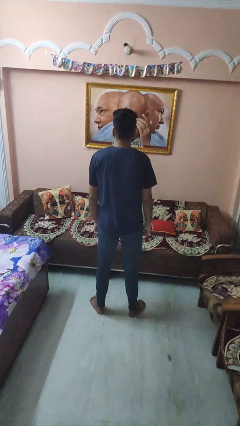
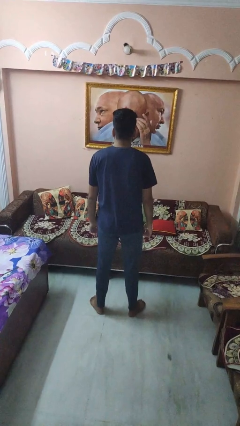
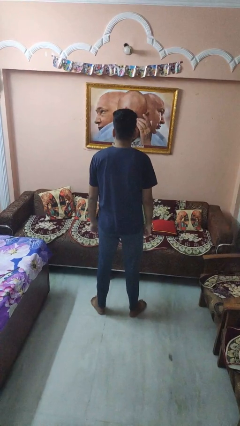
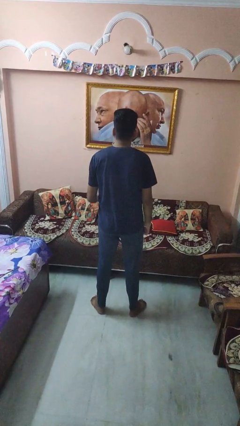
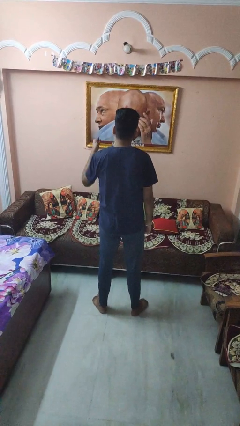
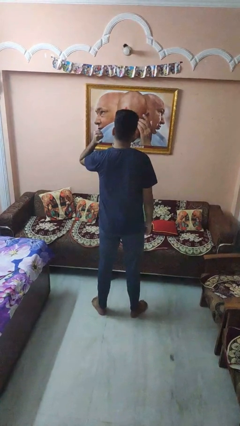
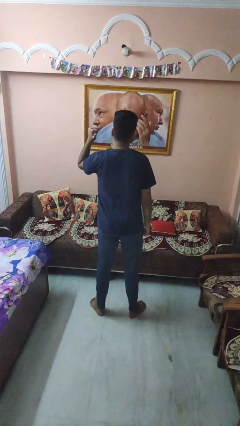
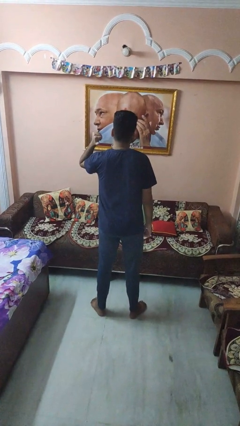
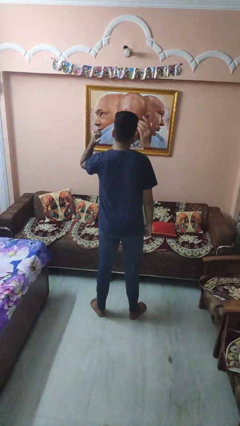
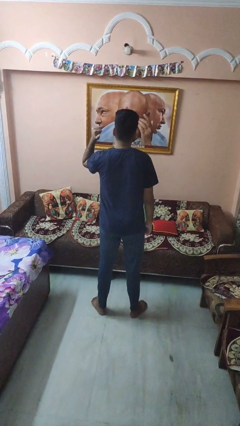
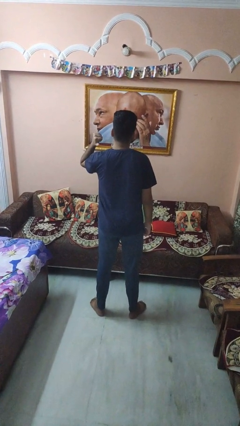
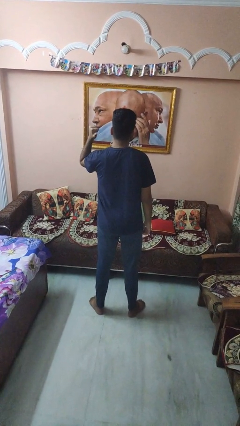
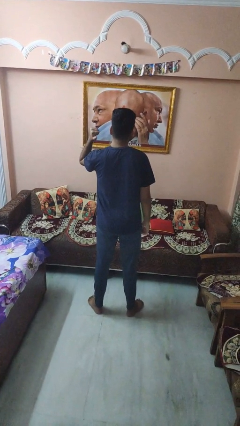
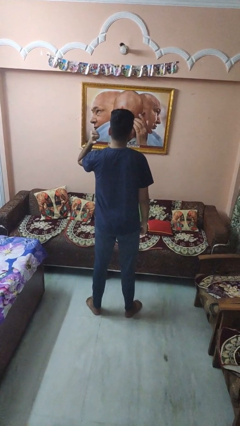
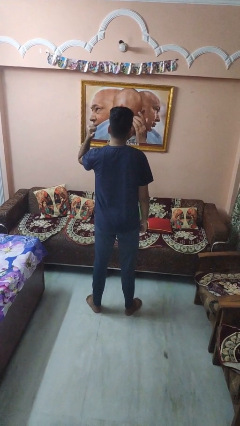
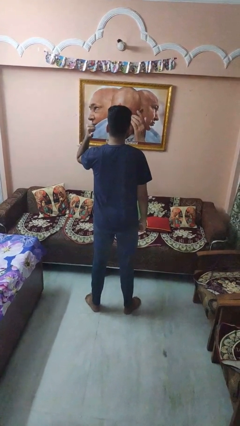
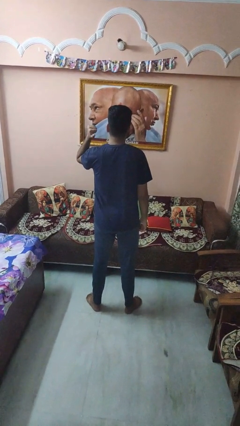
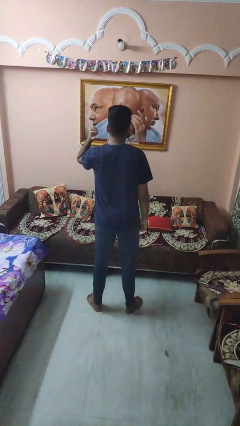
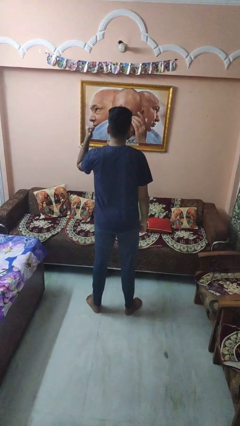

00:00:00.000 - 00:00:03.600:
person gestures behind me

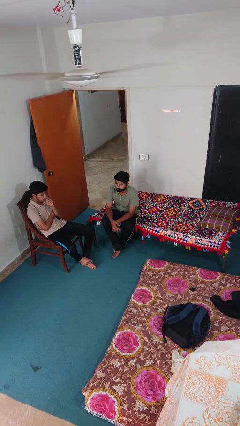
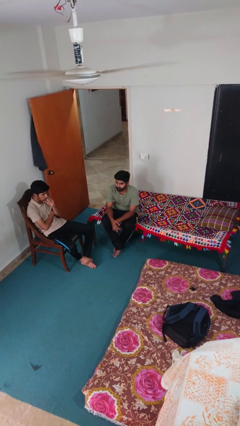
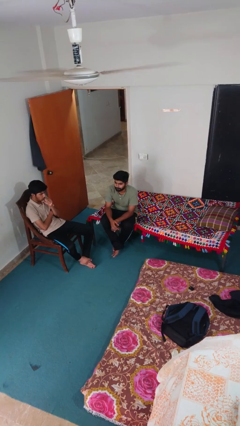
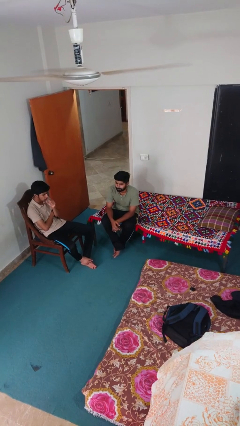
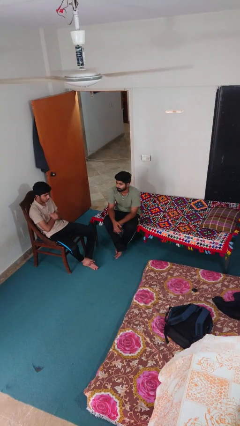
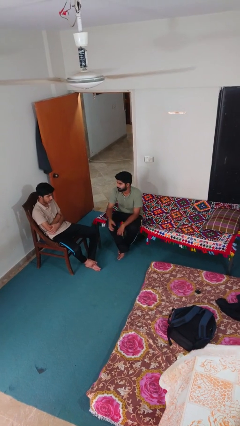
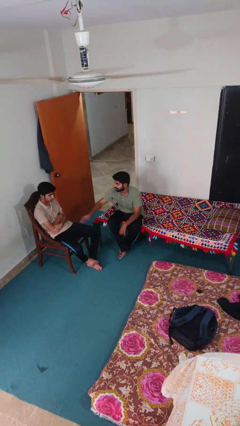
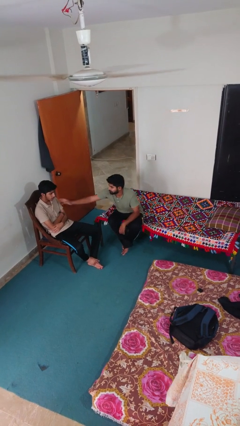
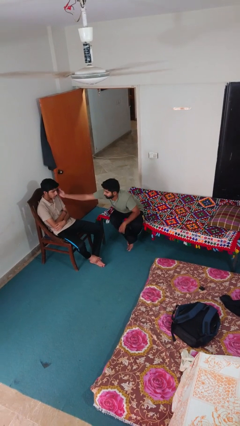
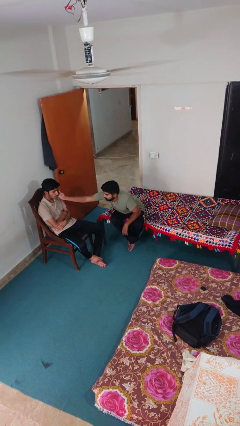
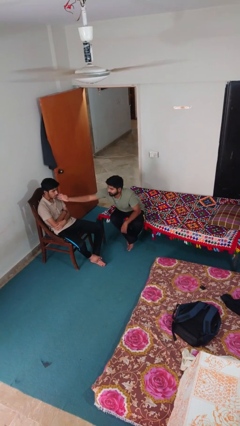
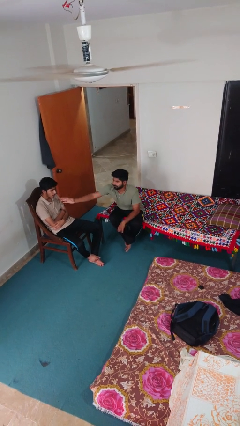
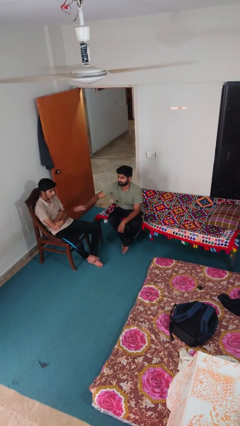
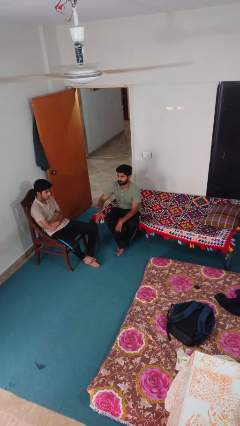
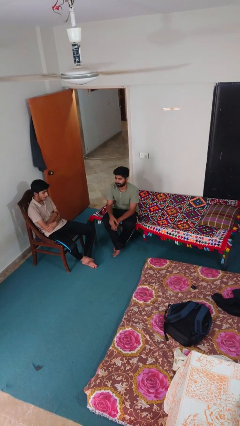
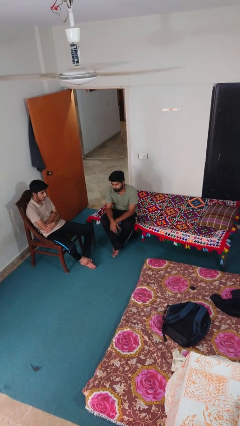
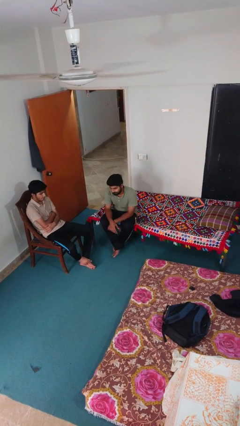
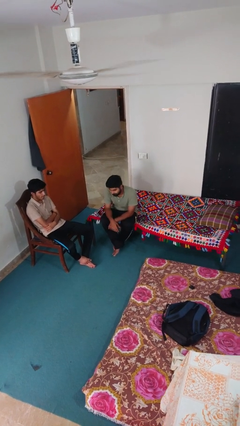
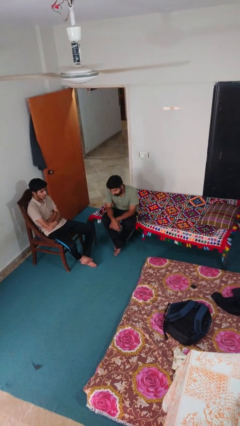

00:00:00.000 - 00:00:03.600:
person touches face of person

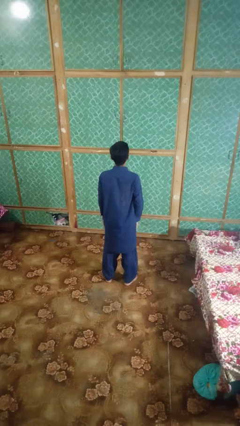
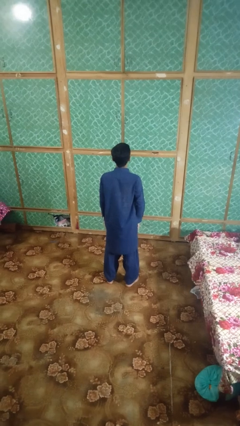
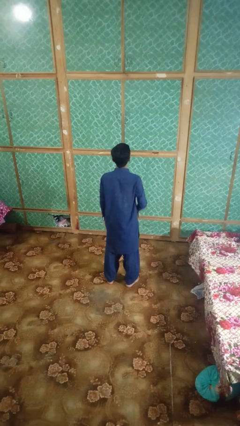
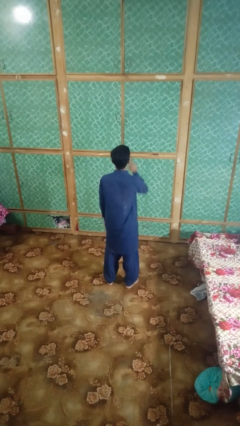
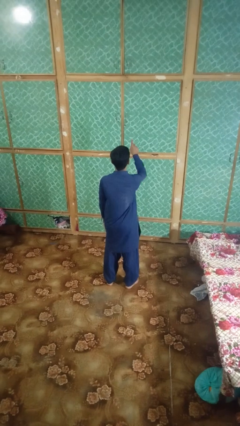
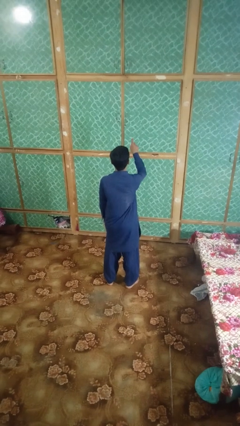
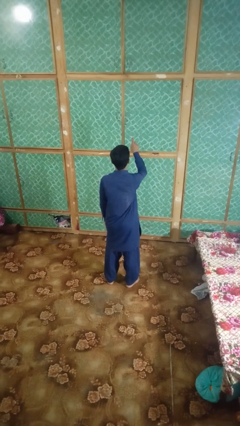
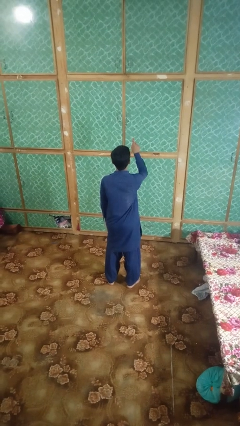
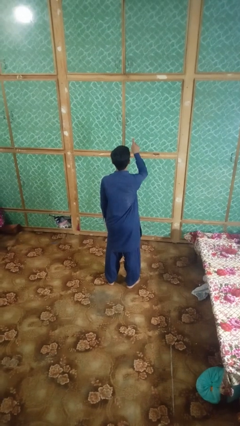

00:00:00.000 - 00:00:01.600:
person gestures number one

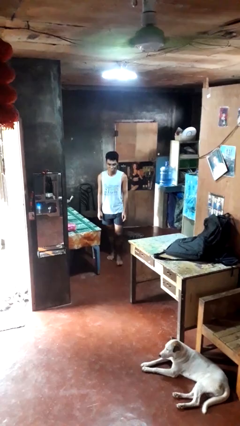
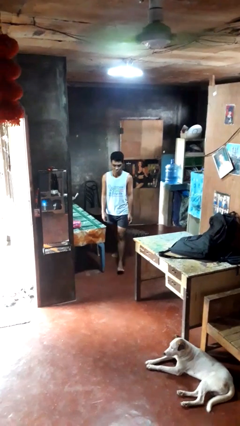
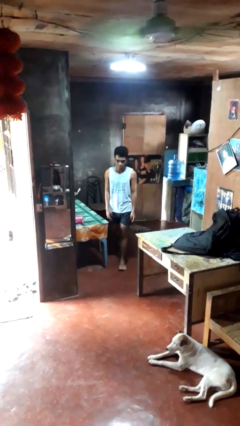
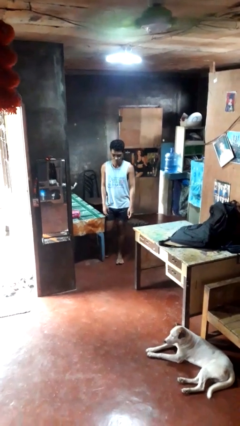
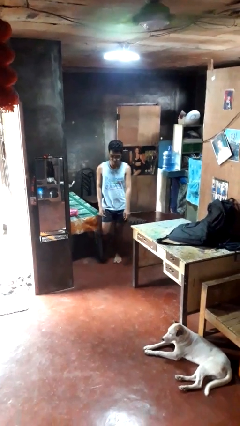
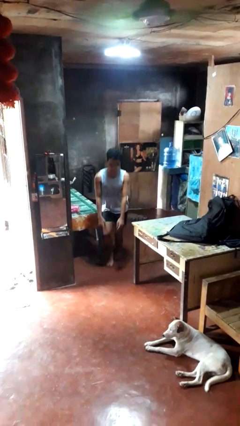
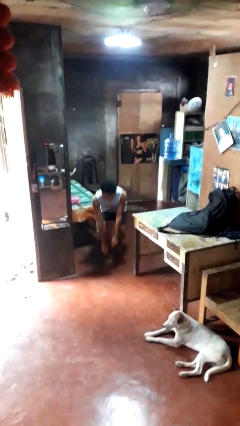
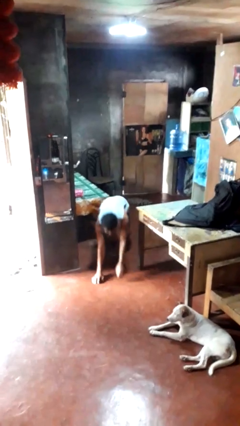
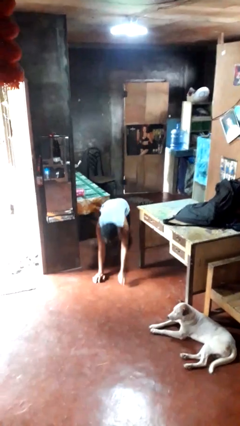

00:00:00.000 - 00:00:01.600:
person trips on object on floor

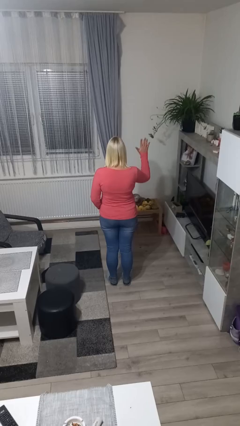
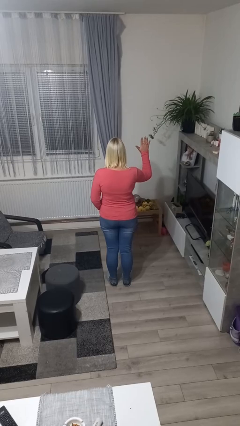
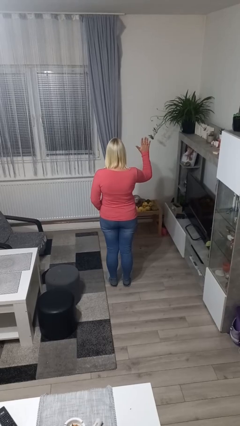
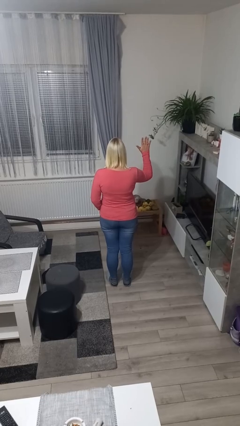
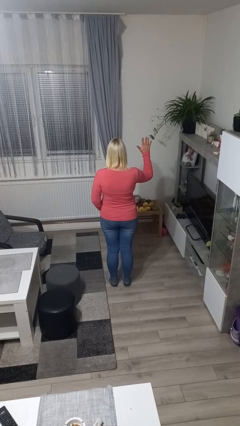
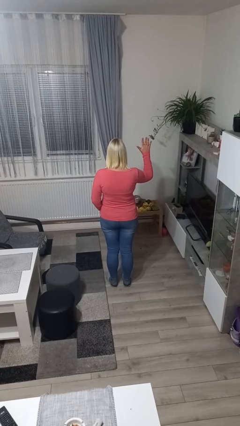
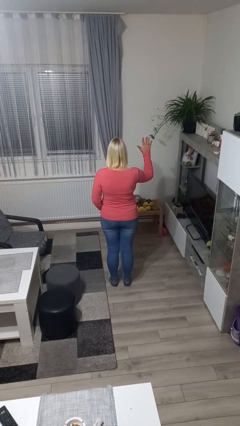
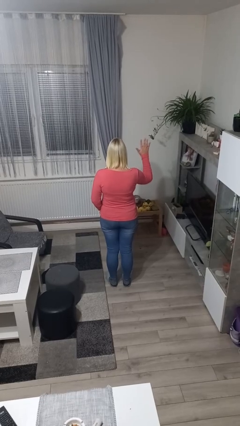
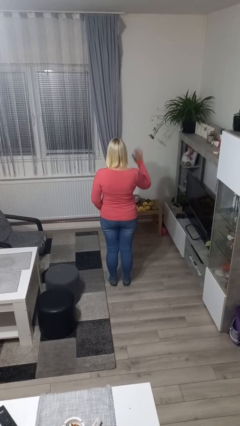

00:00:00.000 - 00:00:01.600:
person gestures number five

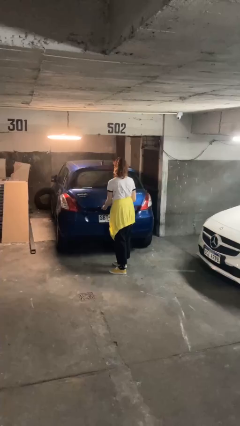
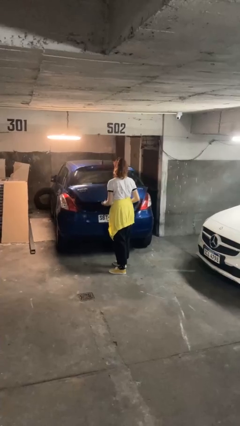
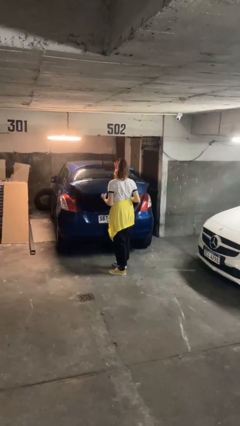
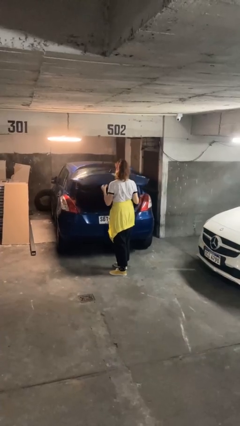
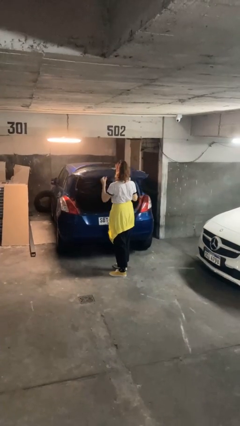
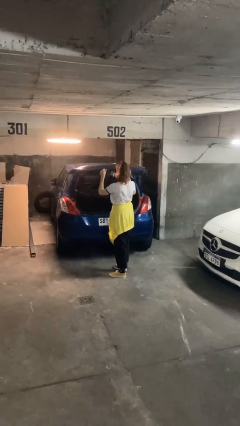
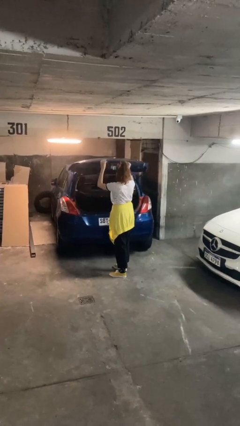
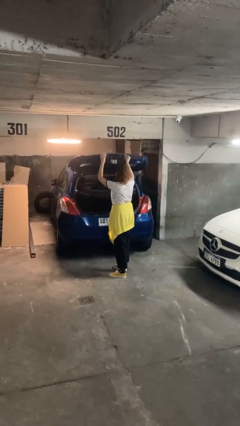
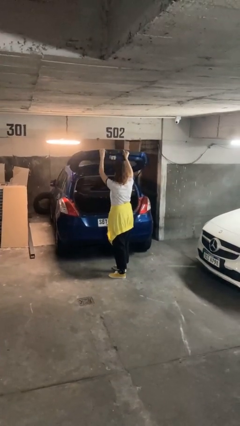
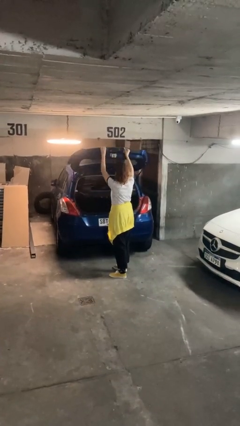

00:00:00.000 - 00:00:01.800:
person opens car trunk

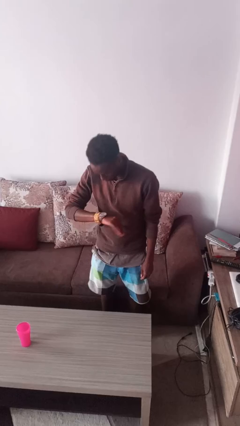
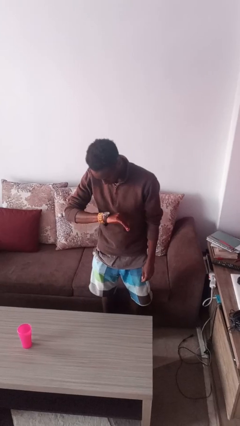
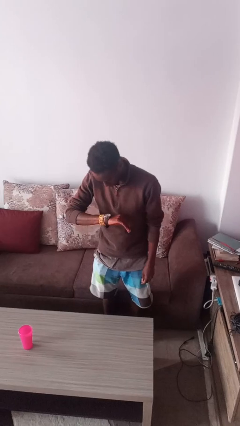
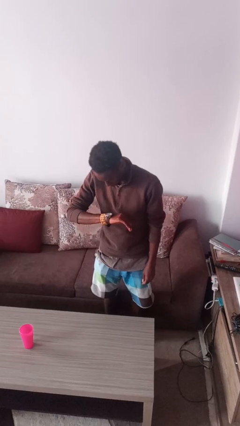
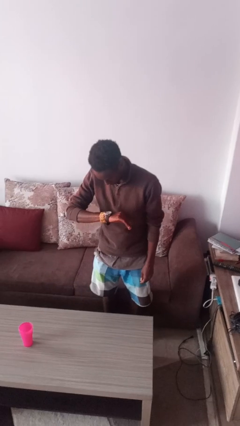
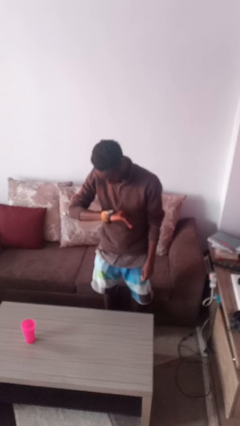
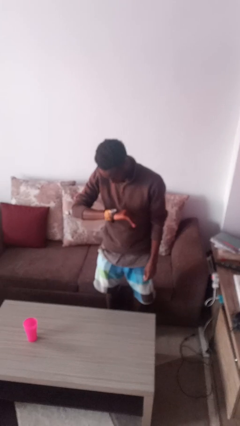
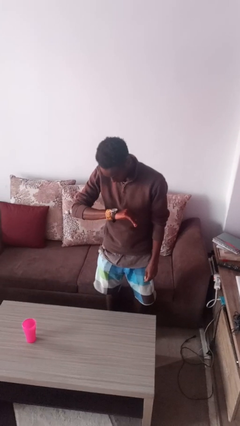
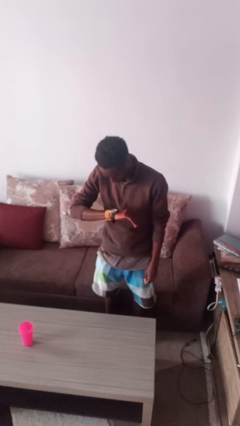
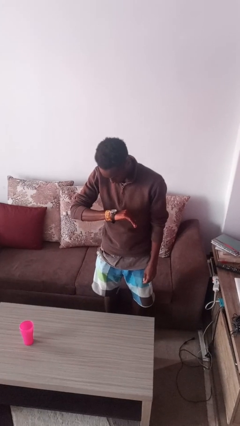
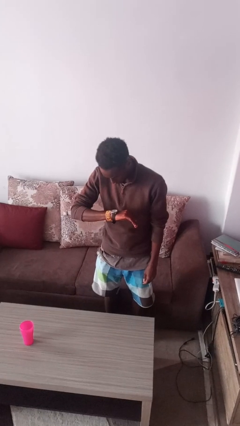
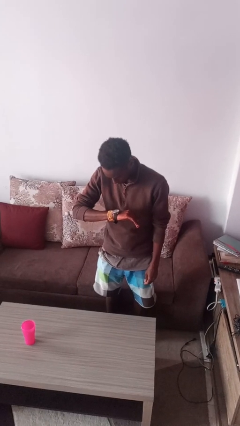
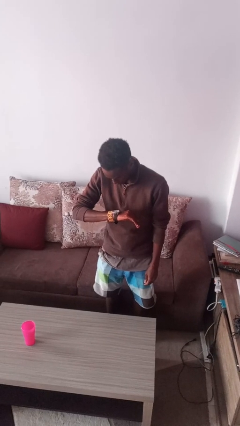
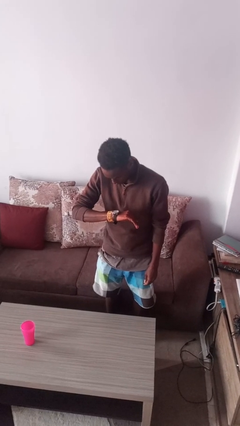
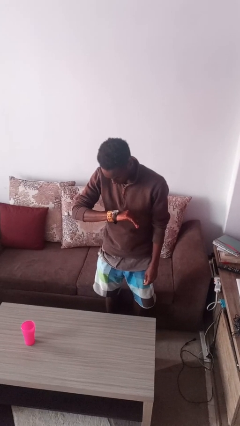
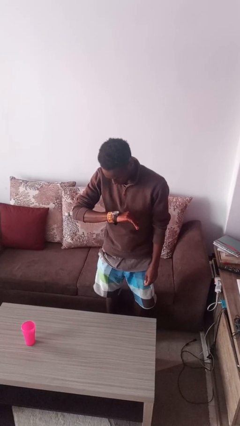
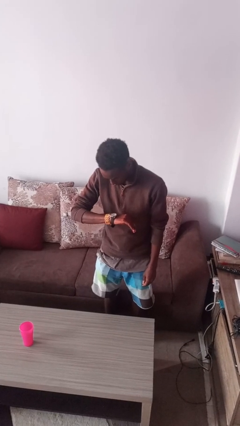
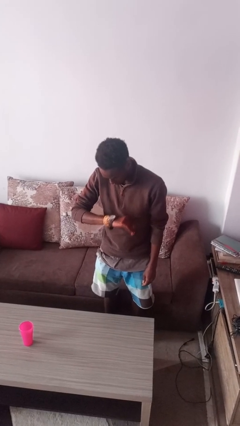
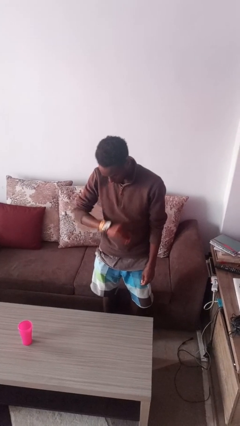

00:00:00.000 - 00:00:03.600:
person looks at wristwatch
